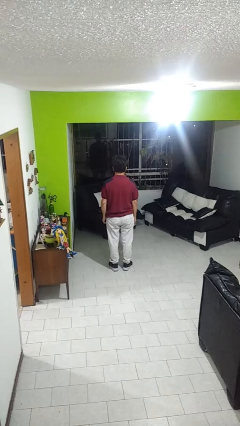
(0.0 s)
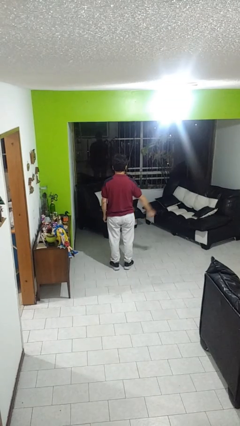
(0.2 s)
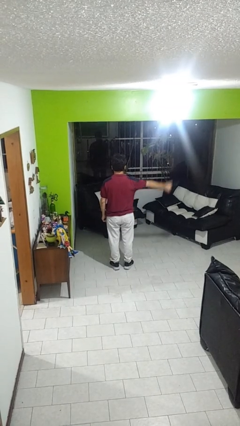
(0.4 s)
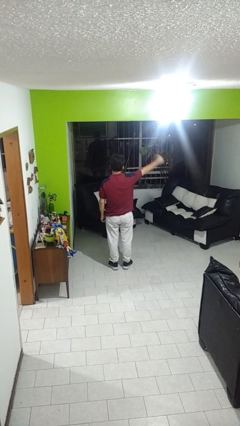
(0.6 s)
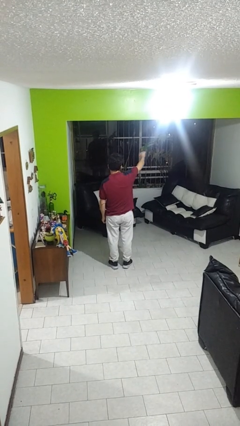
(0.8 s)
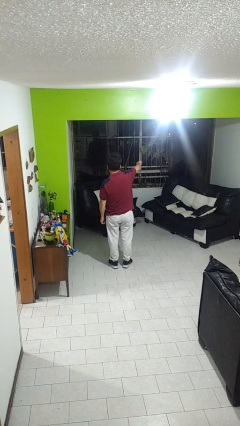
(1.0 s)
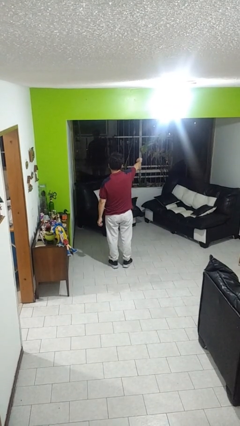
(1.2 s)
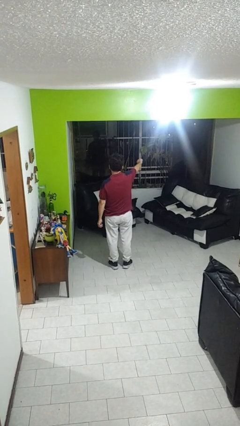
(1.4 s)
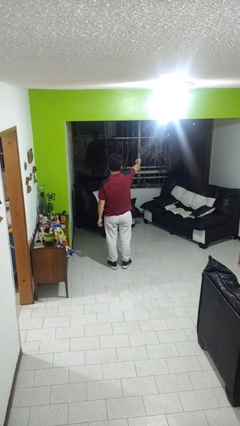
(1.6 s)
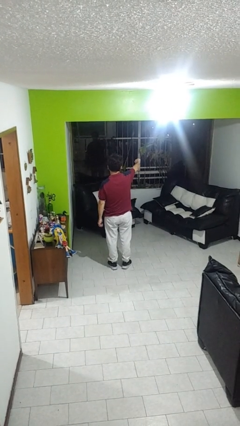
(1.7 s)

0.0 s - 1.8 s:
person gestures thumbs down

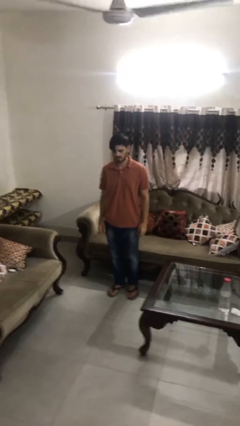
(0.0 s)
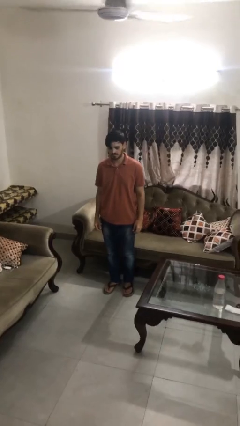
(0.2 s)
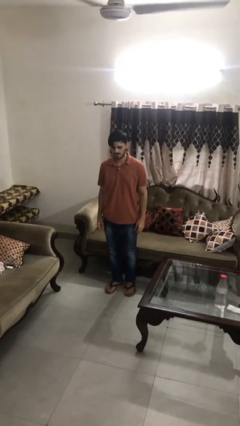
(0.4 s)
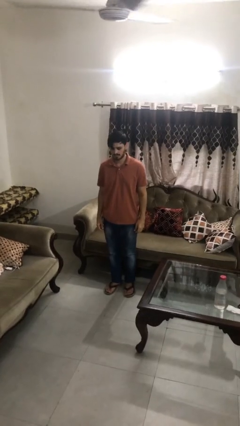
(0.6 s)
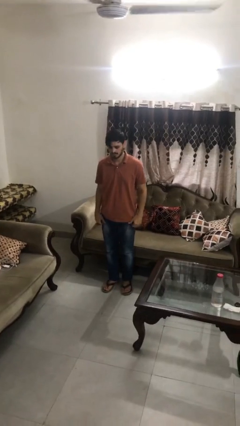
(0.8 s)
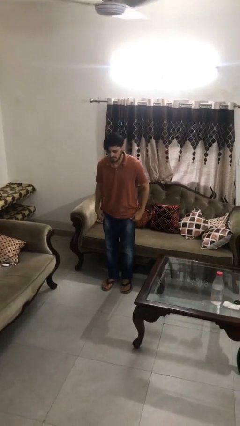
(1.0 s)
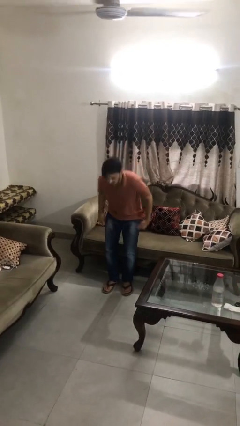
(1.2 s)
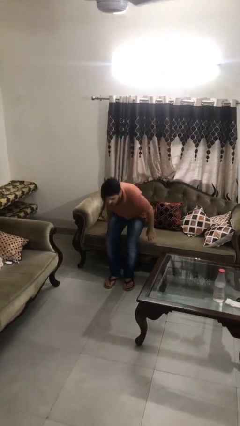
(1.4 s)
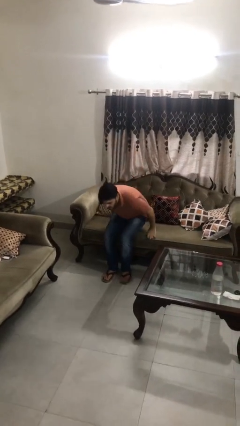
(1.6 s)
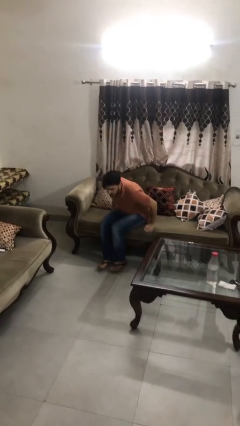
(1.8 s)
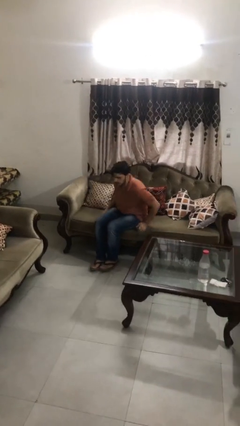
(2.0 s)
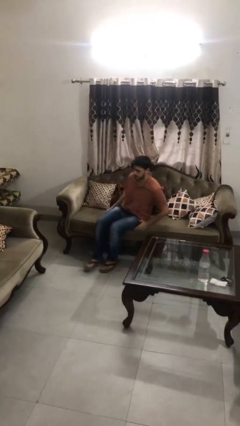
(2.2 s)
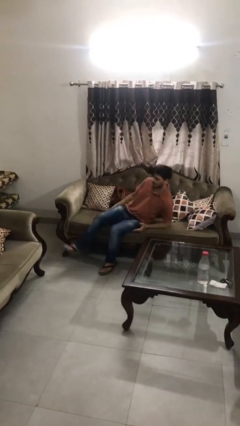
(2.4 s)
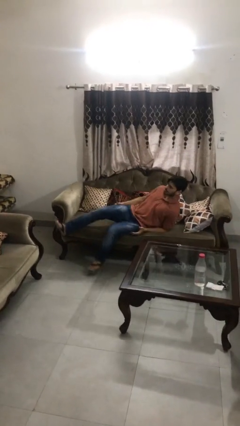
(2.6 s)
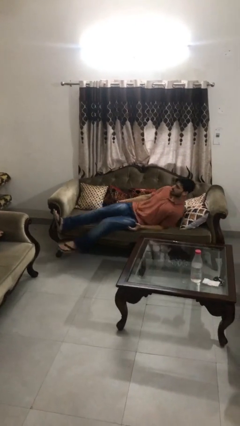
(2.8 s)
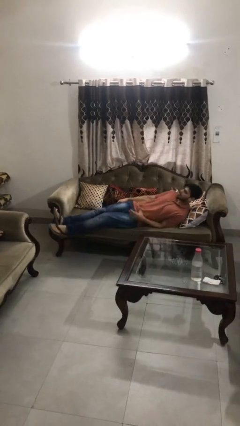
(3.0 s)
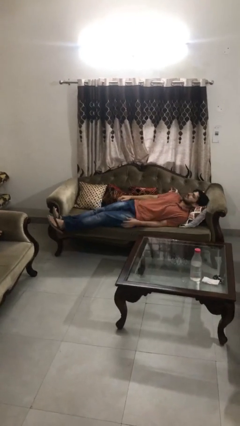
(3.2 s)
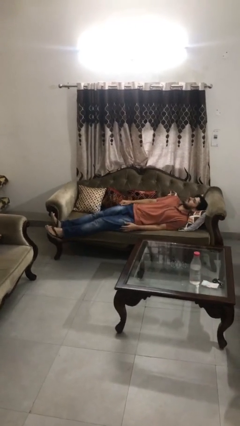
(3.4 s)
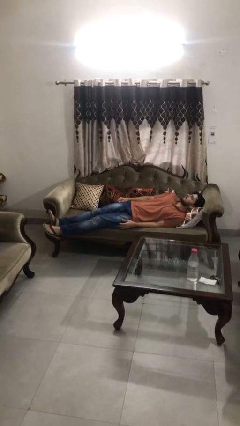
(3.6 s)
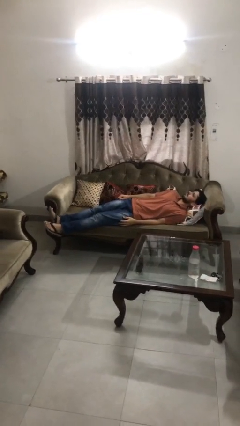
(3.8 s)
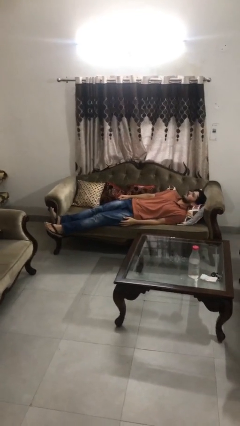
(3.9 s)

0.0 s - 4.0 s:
person lies down on couch

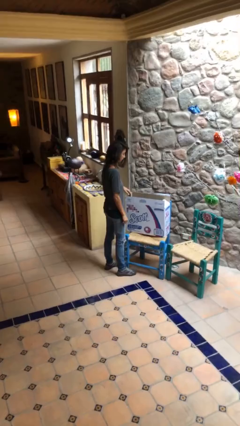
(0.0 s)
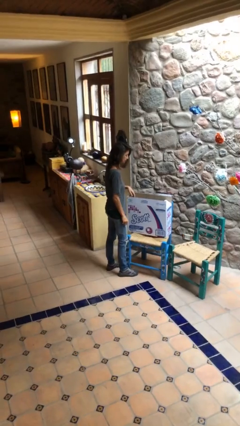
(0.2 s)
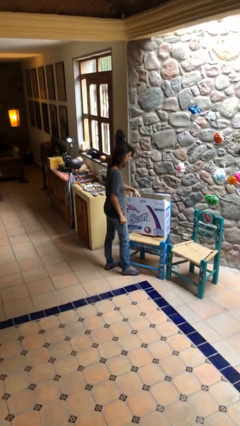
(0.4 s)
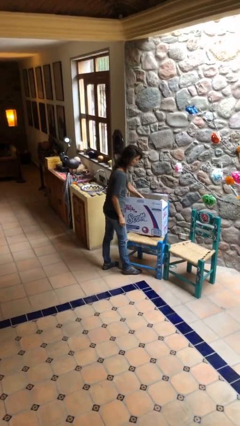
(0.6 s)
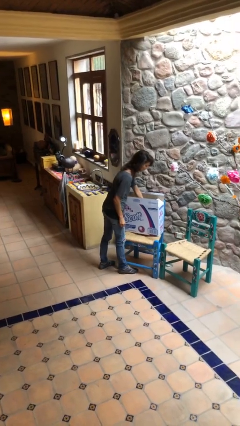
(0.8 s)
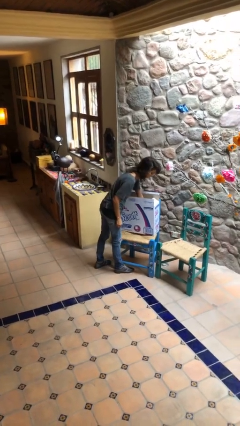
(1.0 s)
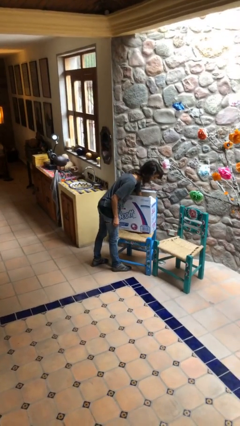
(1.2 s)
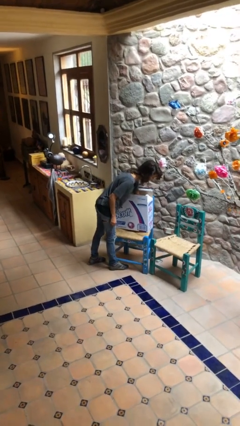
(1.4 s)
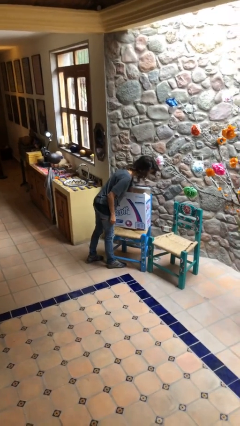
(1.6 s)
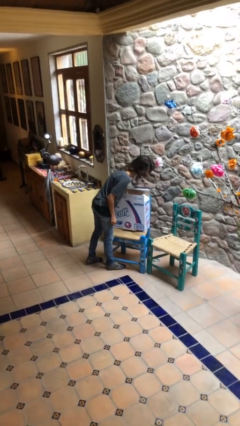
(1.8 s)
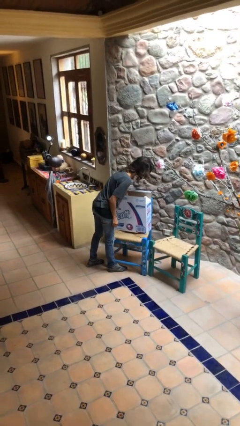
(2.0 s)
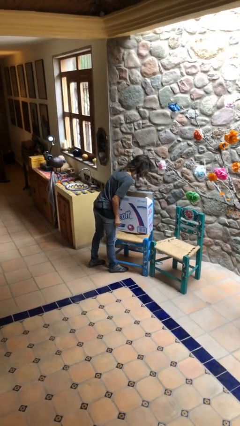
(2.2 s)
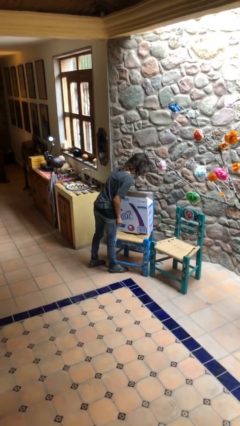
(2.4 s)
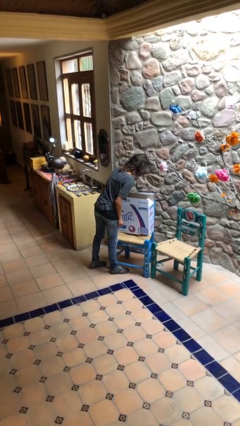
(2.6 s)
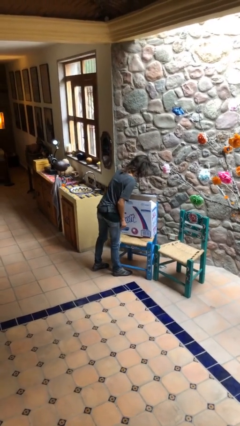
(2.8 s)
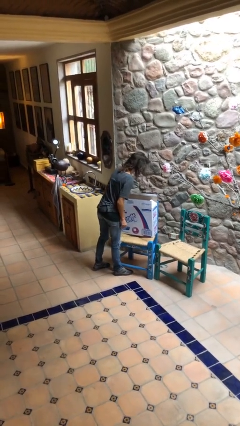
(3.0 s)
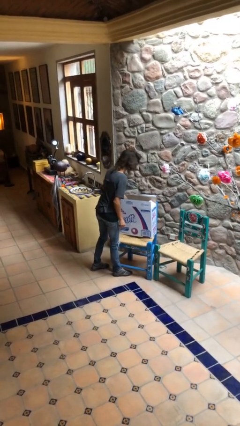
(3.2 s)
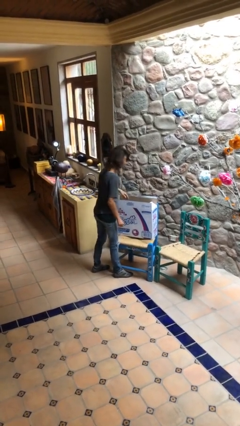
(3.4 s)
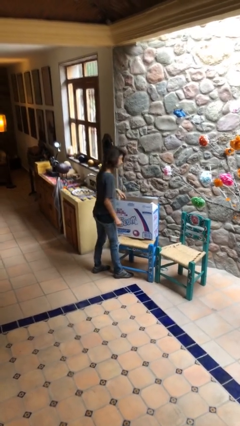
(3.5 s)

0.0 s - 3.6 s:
person searches in box

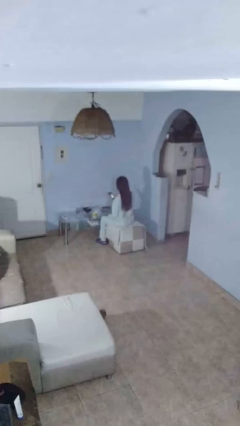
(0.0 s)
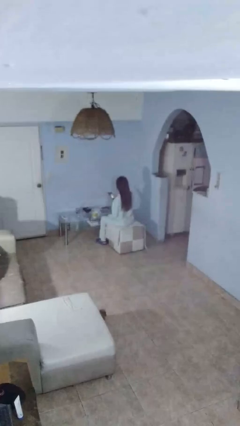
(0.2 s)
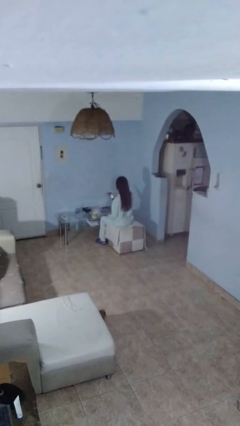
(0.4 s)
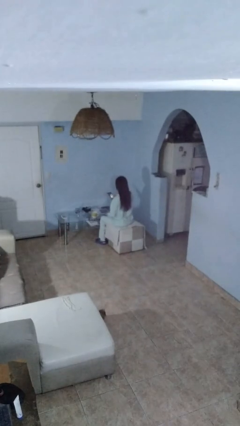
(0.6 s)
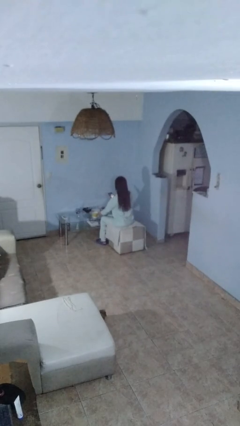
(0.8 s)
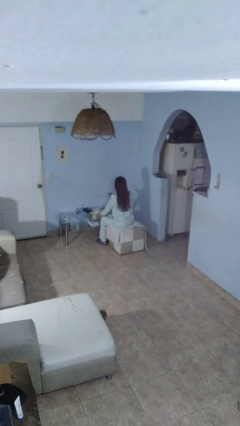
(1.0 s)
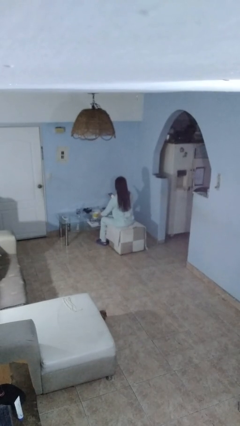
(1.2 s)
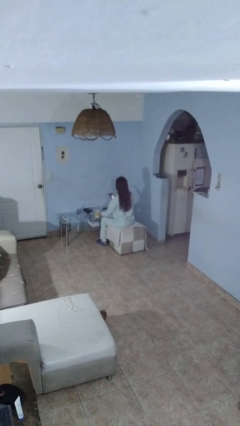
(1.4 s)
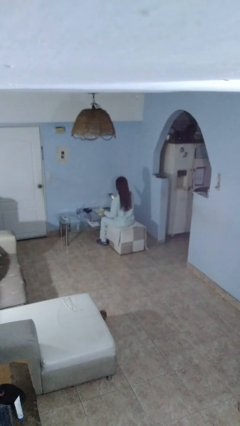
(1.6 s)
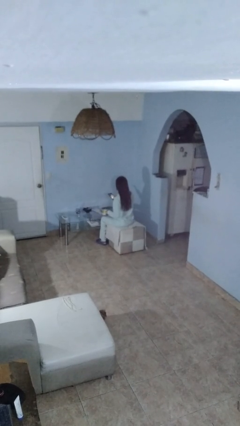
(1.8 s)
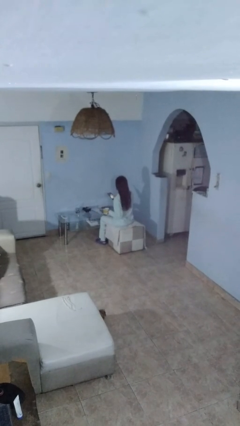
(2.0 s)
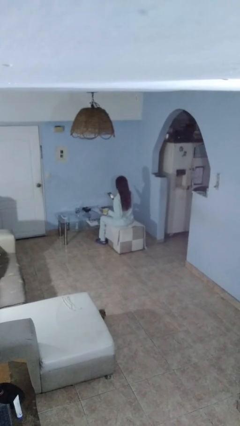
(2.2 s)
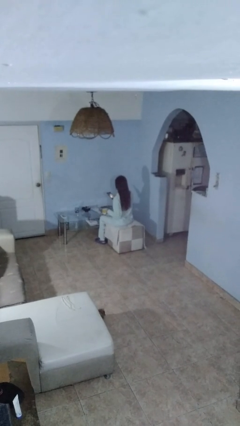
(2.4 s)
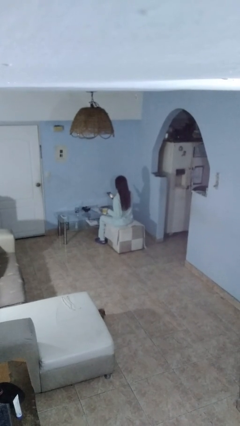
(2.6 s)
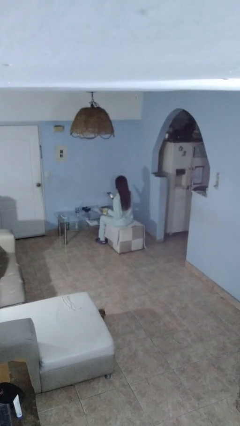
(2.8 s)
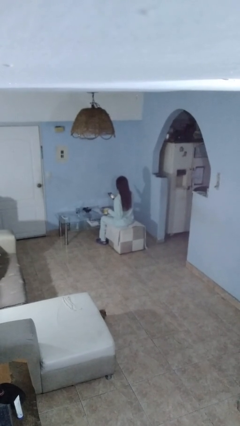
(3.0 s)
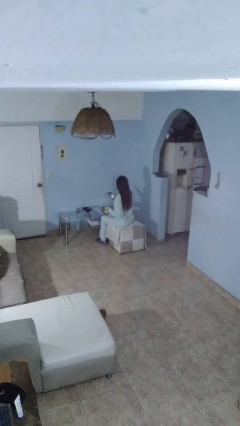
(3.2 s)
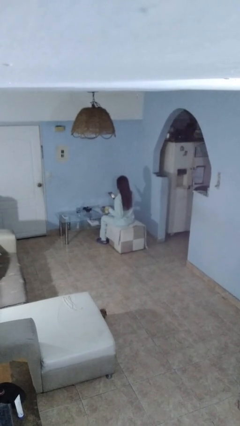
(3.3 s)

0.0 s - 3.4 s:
person picks up object from table

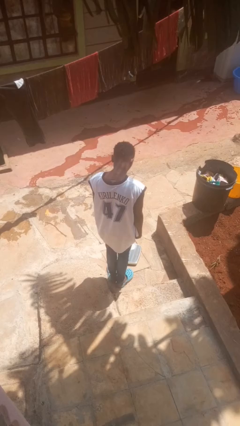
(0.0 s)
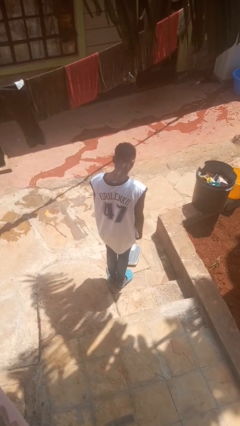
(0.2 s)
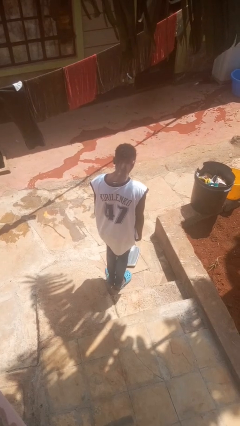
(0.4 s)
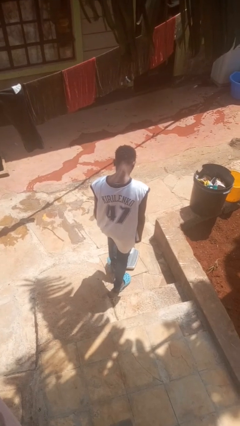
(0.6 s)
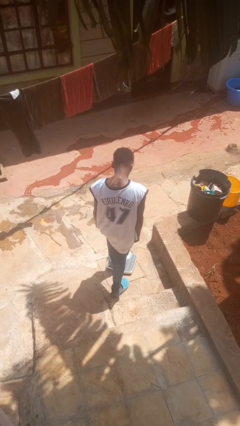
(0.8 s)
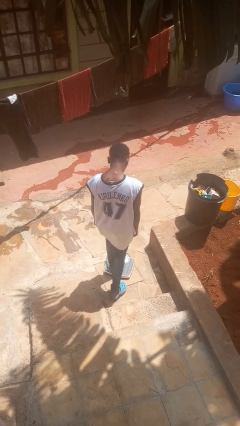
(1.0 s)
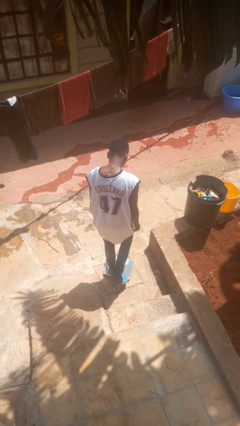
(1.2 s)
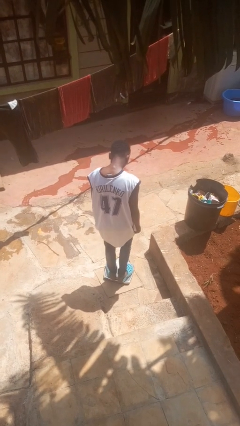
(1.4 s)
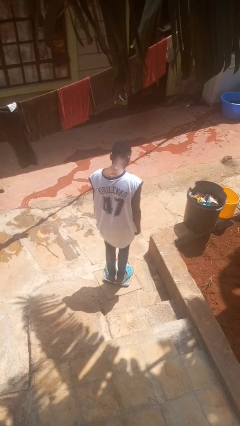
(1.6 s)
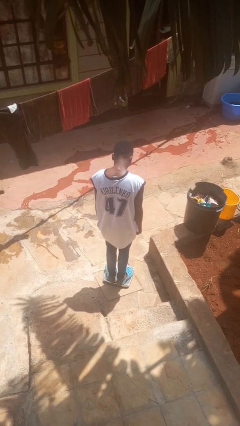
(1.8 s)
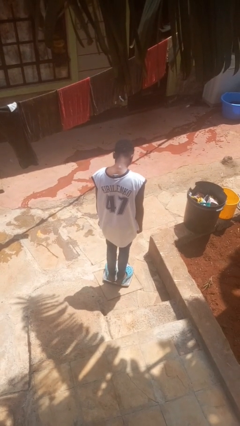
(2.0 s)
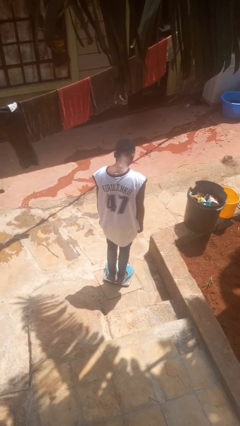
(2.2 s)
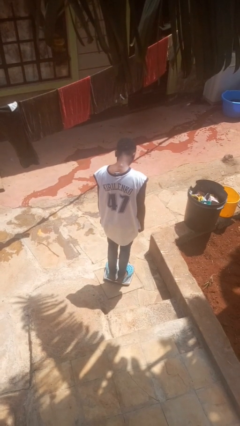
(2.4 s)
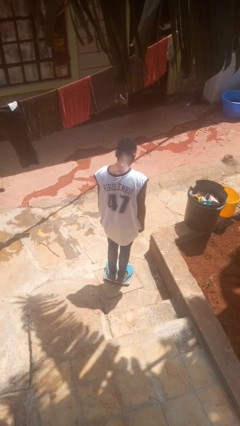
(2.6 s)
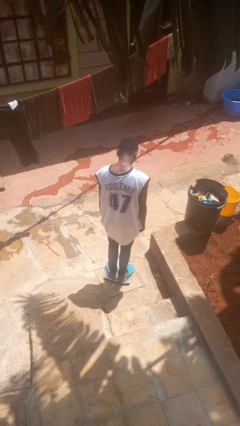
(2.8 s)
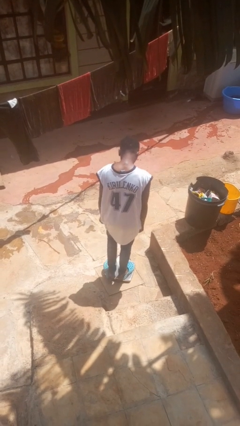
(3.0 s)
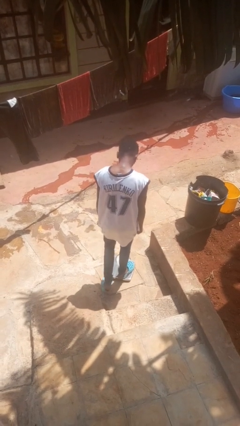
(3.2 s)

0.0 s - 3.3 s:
person uses bodyweight scale

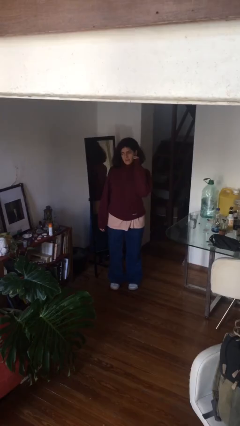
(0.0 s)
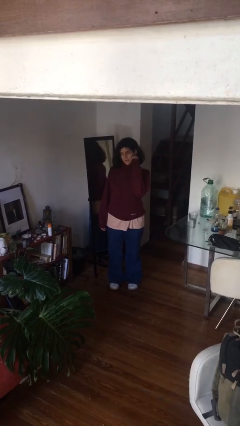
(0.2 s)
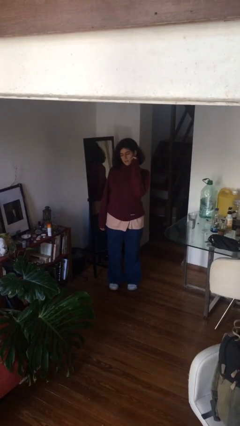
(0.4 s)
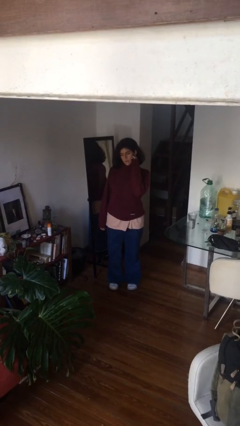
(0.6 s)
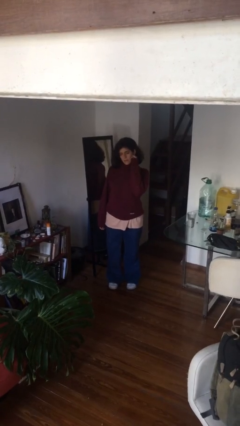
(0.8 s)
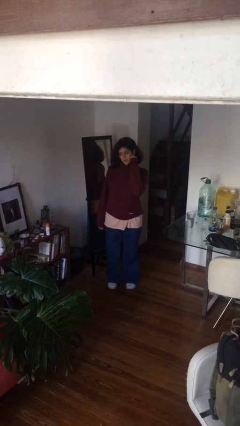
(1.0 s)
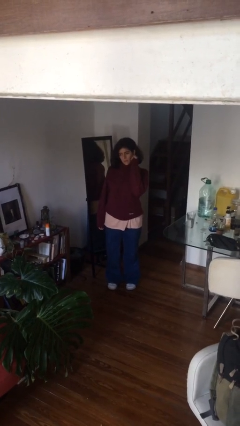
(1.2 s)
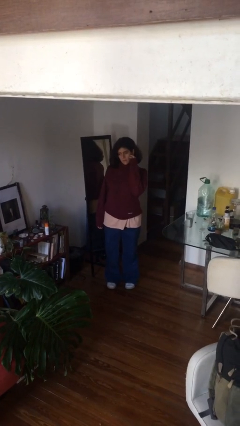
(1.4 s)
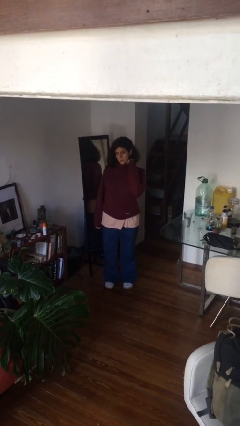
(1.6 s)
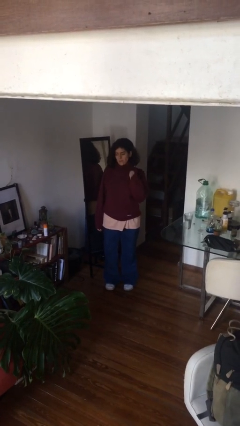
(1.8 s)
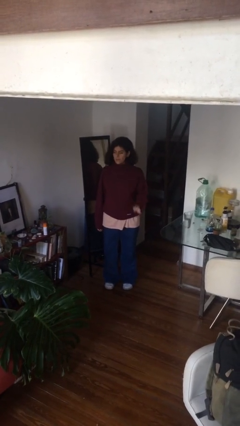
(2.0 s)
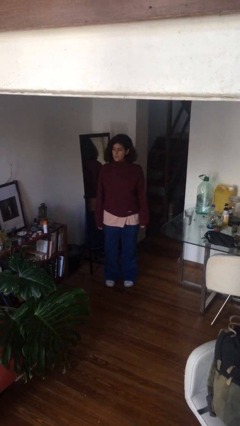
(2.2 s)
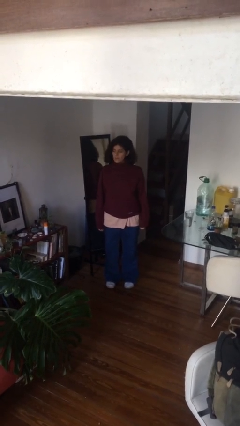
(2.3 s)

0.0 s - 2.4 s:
person scratches face
